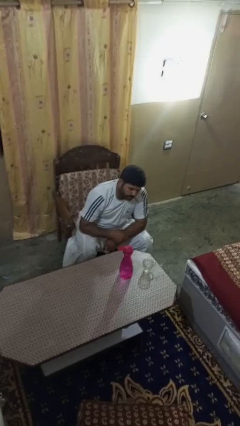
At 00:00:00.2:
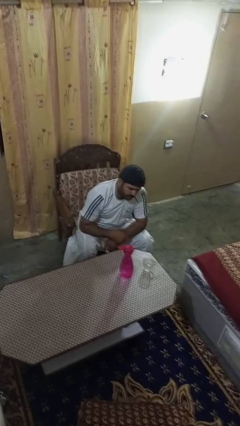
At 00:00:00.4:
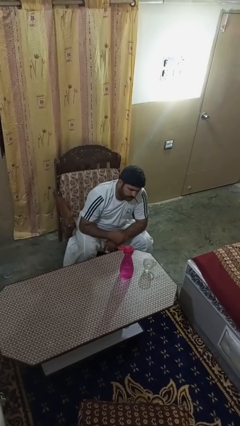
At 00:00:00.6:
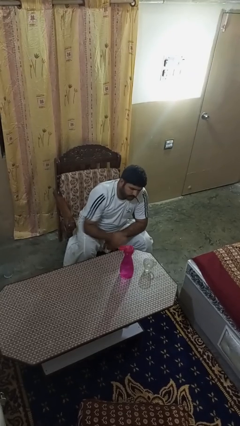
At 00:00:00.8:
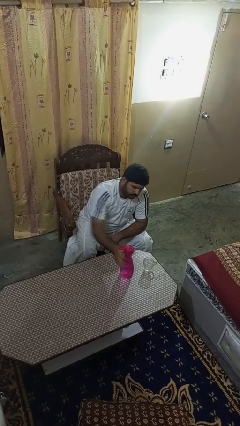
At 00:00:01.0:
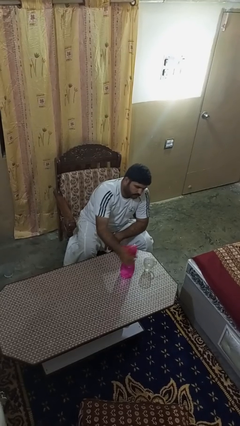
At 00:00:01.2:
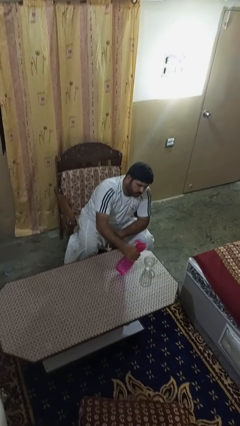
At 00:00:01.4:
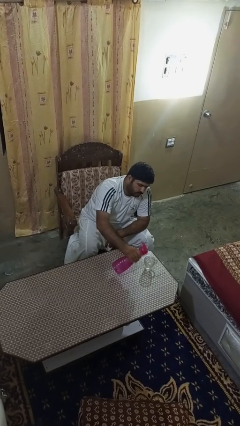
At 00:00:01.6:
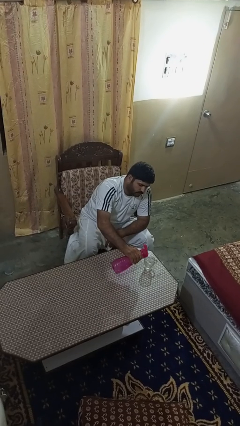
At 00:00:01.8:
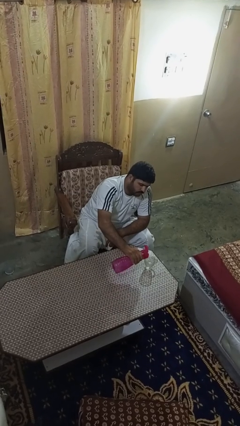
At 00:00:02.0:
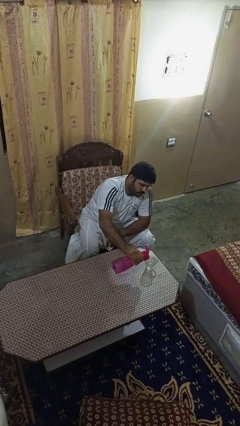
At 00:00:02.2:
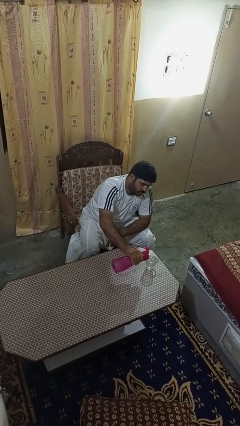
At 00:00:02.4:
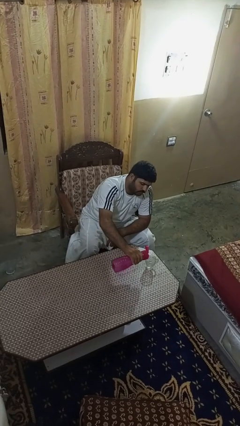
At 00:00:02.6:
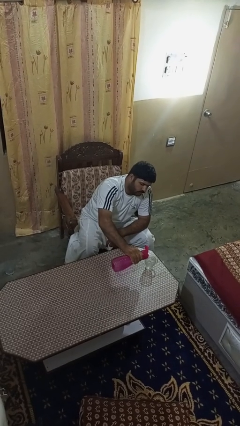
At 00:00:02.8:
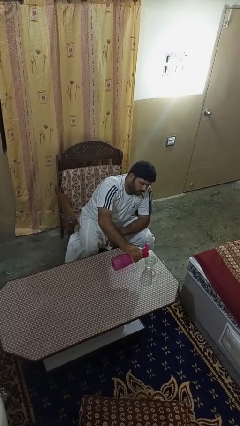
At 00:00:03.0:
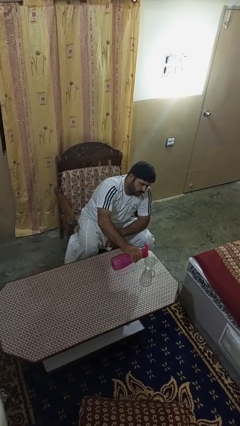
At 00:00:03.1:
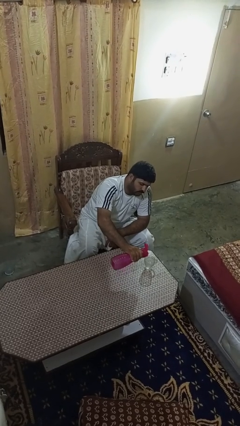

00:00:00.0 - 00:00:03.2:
person pours liquid into cup

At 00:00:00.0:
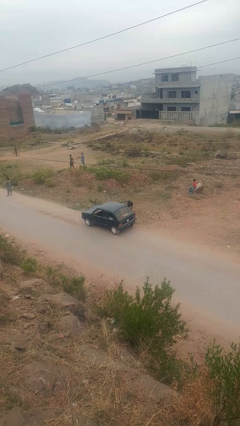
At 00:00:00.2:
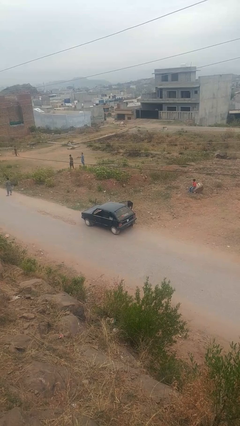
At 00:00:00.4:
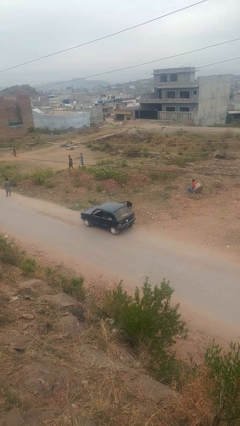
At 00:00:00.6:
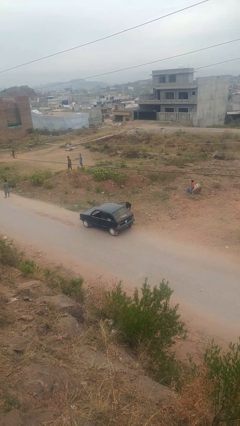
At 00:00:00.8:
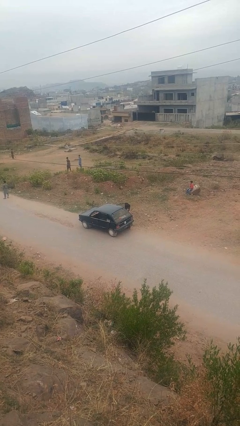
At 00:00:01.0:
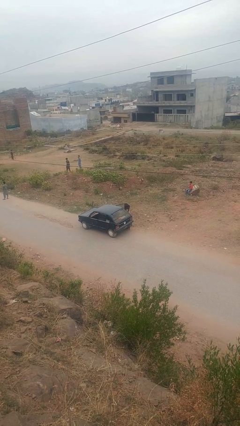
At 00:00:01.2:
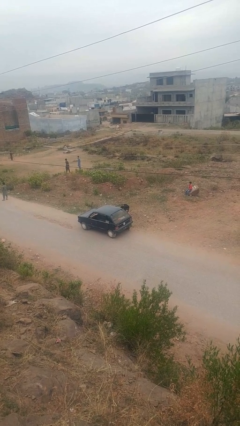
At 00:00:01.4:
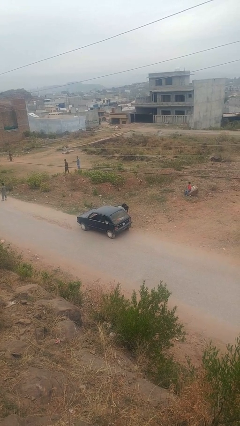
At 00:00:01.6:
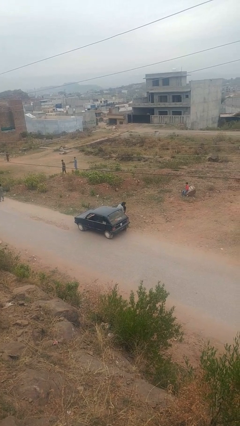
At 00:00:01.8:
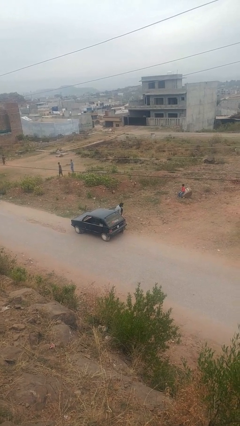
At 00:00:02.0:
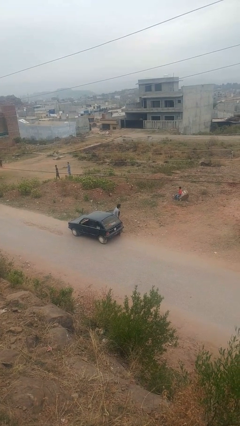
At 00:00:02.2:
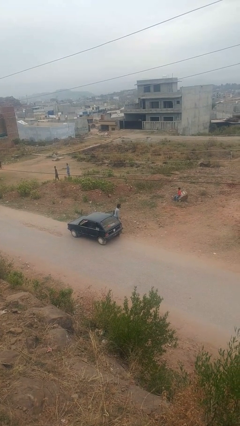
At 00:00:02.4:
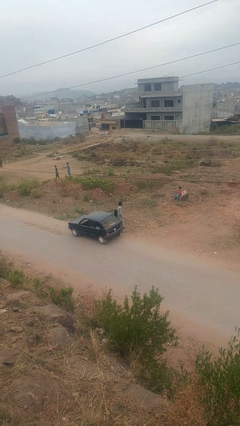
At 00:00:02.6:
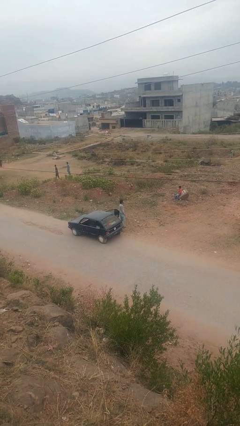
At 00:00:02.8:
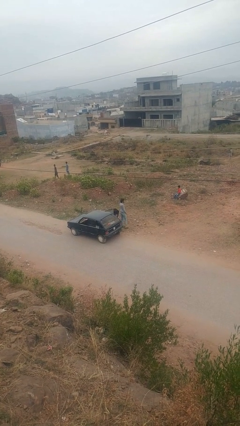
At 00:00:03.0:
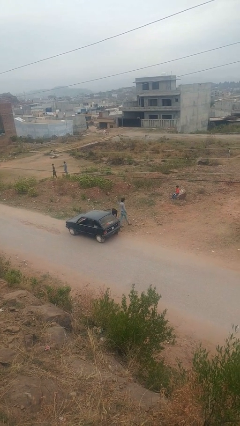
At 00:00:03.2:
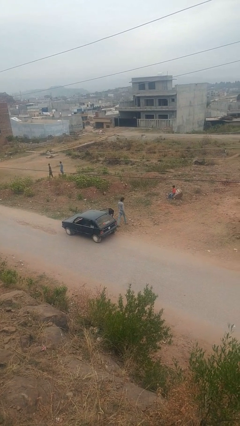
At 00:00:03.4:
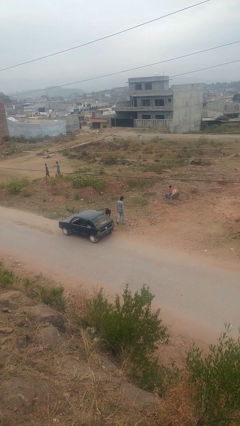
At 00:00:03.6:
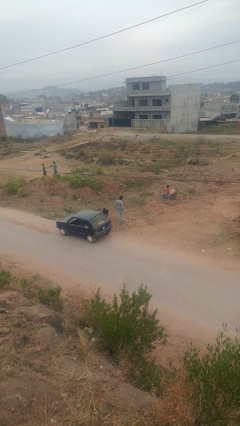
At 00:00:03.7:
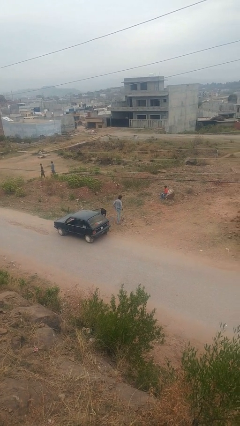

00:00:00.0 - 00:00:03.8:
person exits car

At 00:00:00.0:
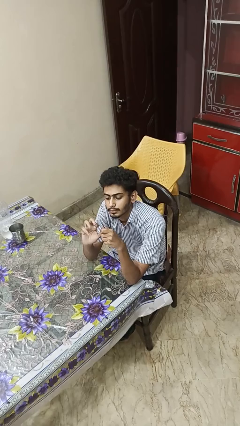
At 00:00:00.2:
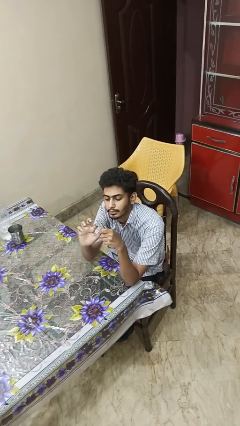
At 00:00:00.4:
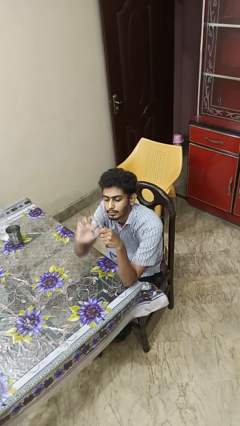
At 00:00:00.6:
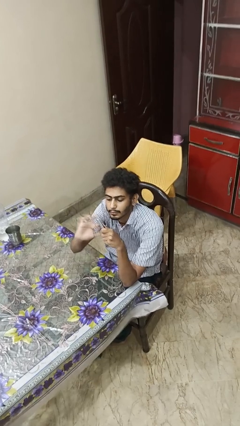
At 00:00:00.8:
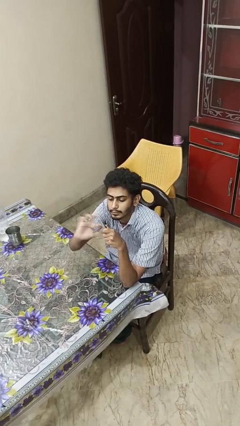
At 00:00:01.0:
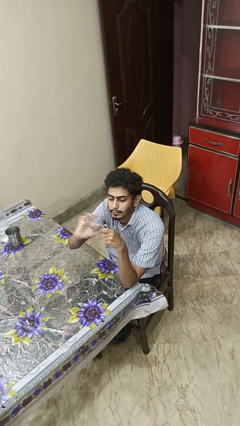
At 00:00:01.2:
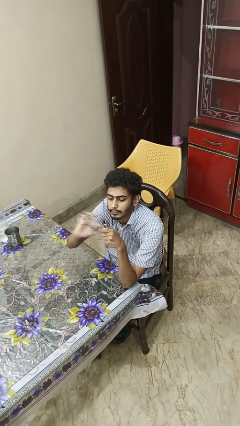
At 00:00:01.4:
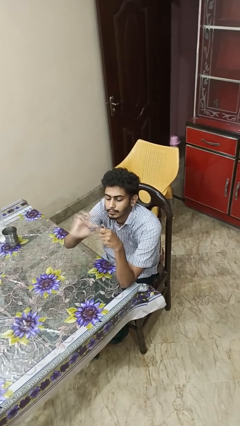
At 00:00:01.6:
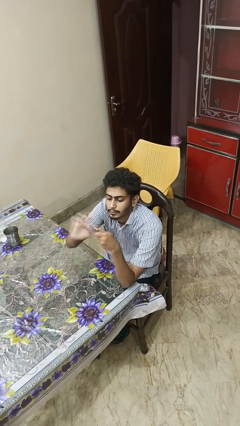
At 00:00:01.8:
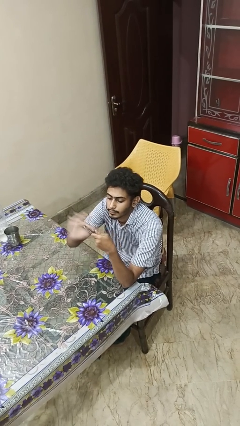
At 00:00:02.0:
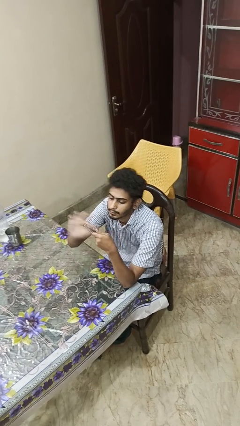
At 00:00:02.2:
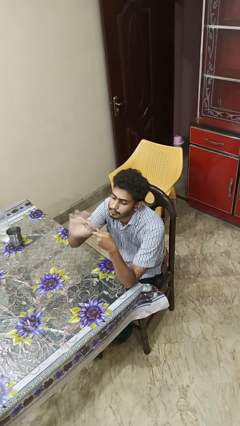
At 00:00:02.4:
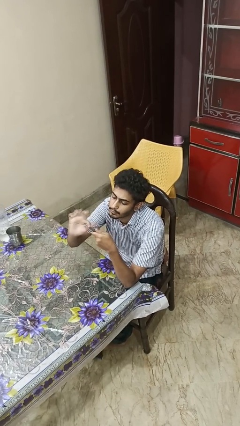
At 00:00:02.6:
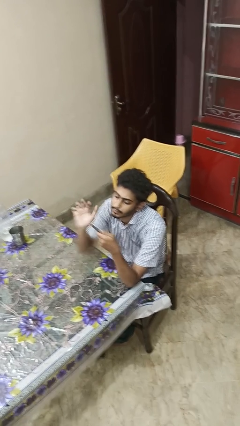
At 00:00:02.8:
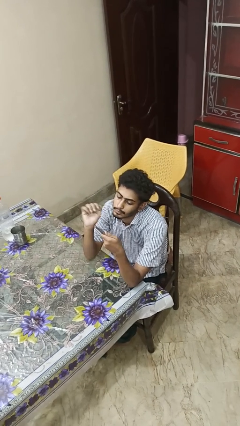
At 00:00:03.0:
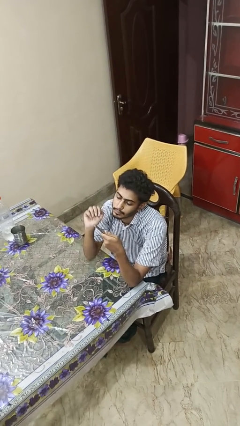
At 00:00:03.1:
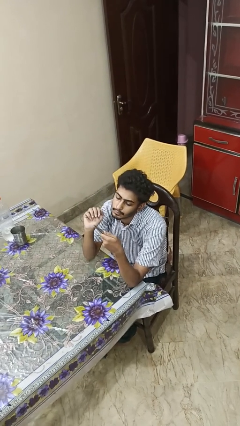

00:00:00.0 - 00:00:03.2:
person files fingernails

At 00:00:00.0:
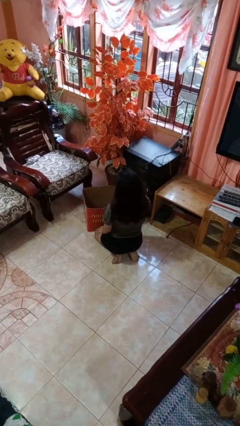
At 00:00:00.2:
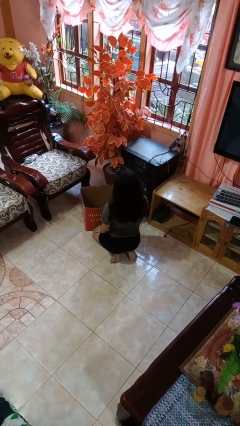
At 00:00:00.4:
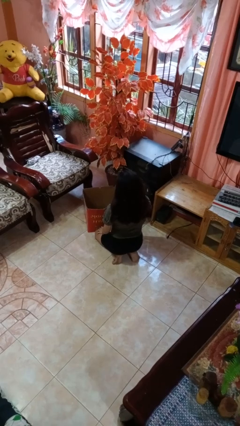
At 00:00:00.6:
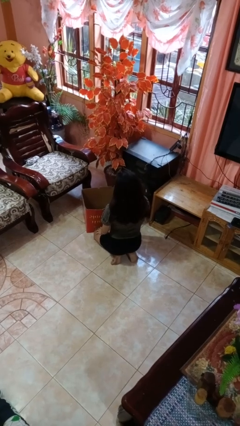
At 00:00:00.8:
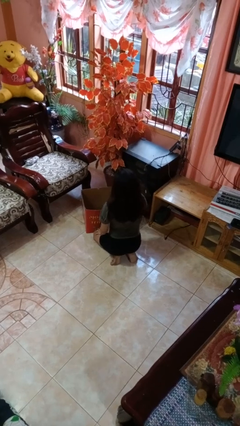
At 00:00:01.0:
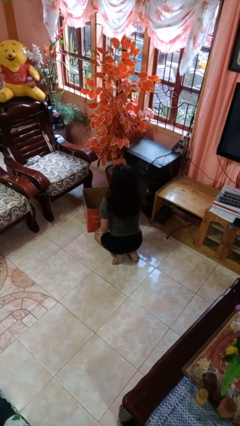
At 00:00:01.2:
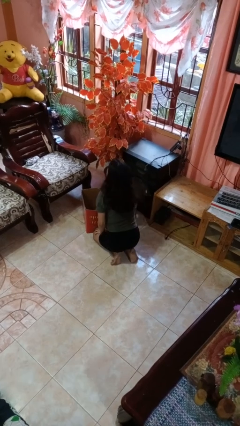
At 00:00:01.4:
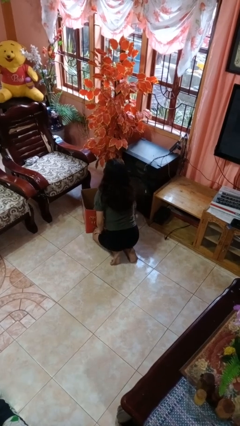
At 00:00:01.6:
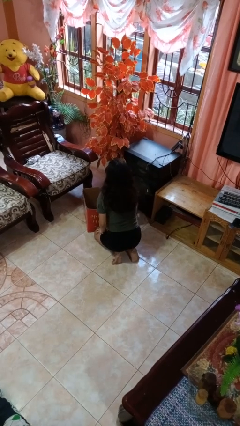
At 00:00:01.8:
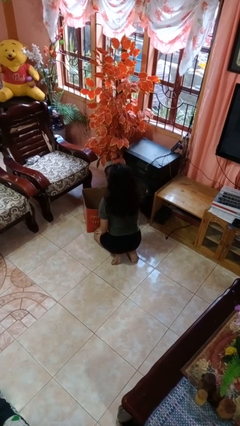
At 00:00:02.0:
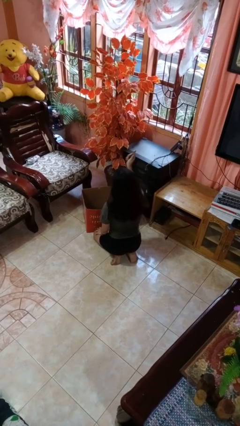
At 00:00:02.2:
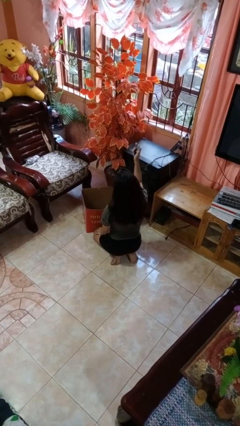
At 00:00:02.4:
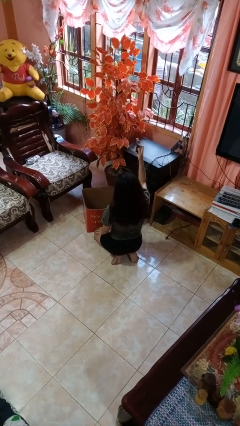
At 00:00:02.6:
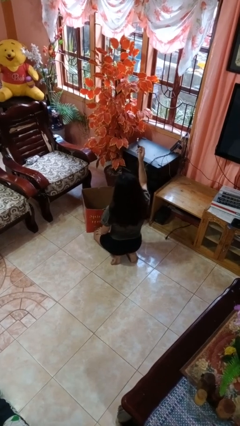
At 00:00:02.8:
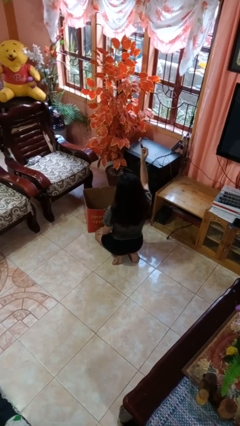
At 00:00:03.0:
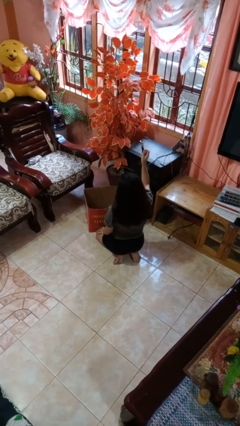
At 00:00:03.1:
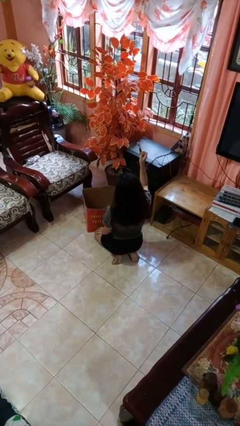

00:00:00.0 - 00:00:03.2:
person takes object from box

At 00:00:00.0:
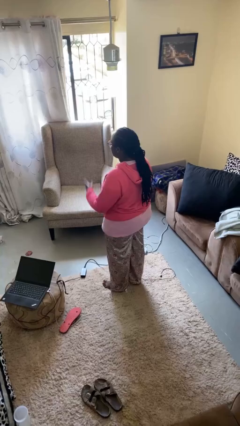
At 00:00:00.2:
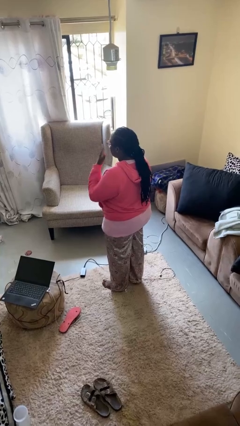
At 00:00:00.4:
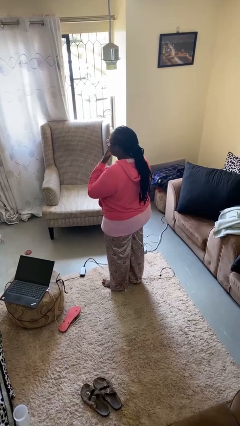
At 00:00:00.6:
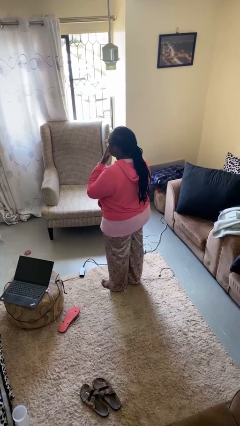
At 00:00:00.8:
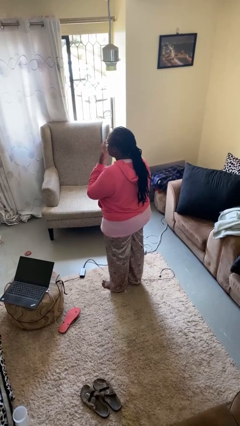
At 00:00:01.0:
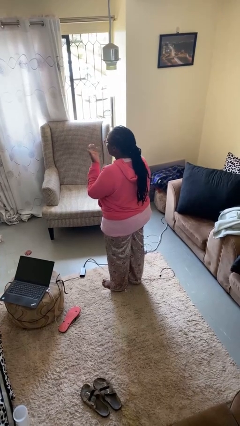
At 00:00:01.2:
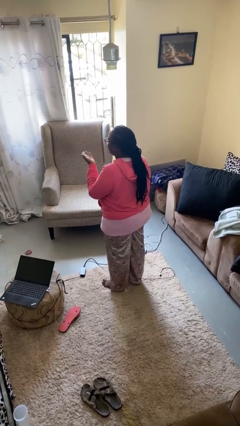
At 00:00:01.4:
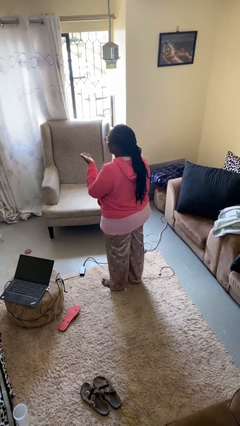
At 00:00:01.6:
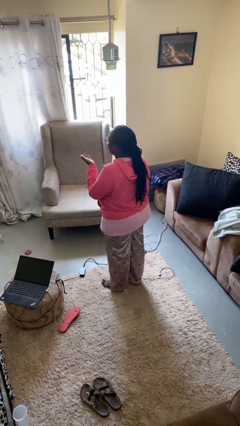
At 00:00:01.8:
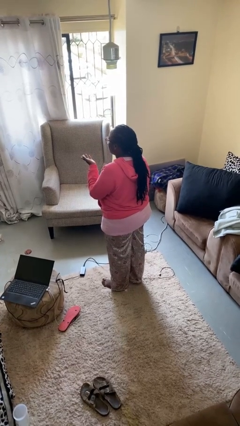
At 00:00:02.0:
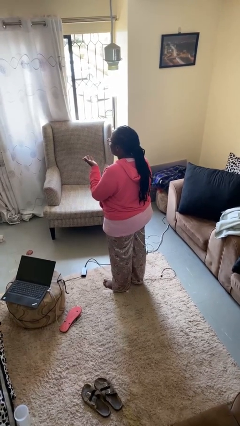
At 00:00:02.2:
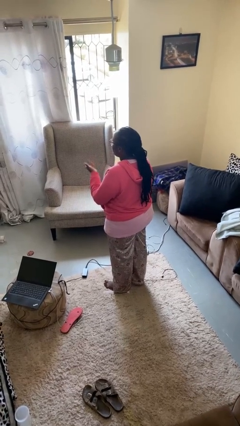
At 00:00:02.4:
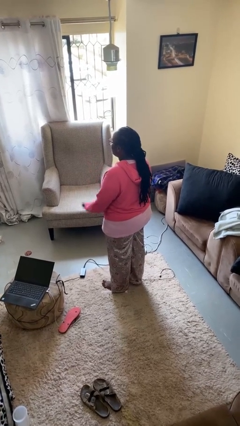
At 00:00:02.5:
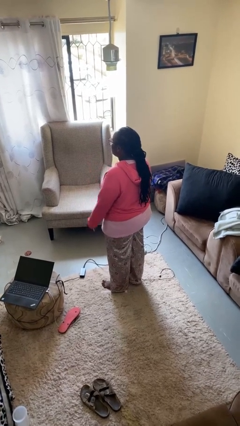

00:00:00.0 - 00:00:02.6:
person gestures blow kiss

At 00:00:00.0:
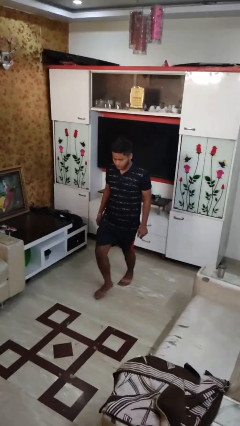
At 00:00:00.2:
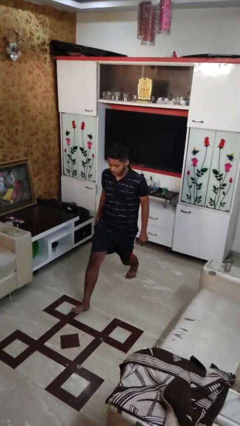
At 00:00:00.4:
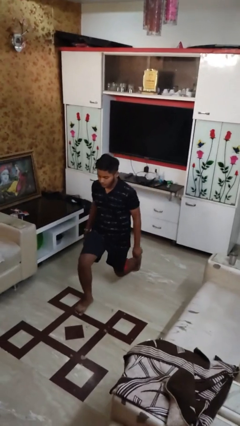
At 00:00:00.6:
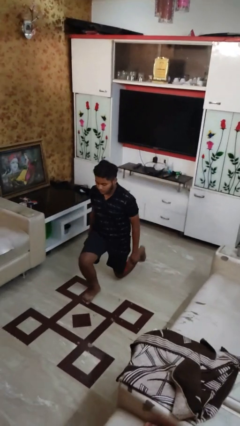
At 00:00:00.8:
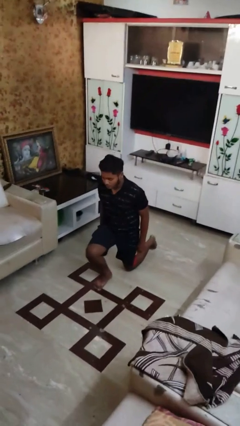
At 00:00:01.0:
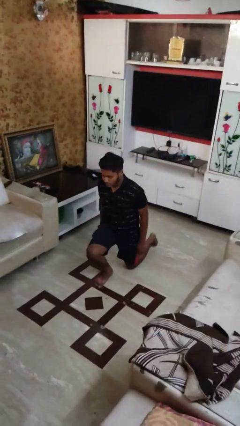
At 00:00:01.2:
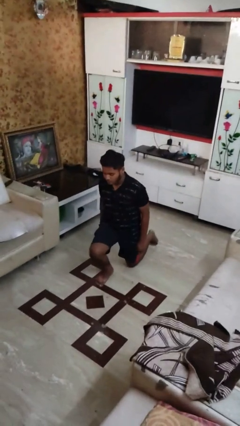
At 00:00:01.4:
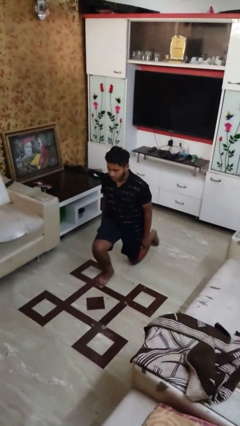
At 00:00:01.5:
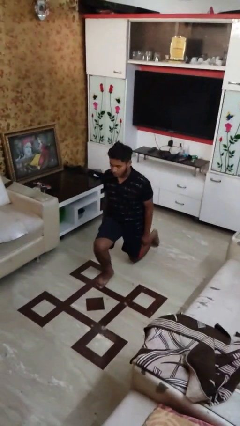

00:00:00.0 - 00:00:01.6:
person exercises with lunges
